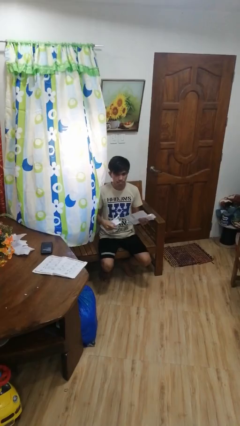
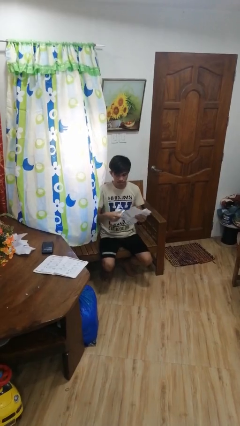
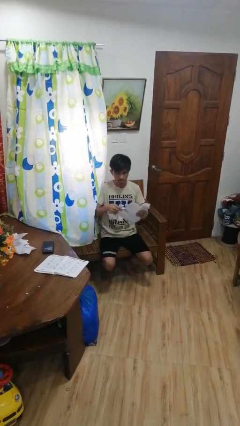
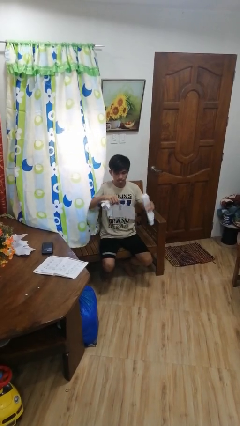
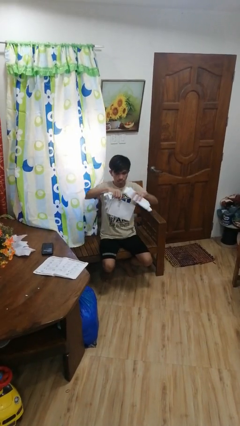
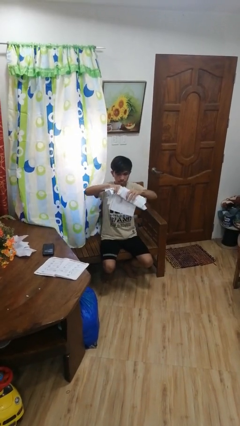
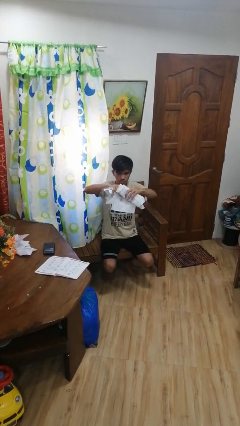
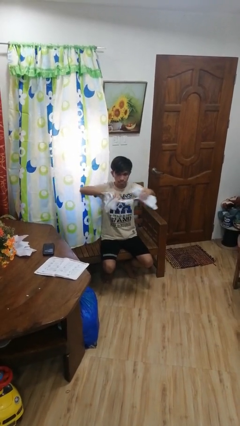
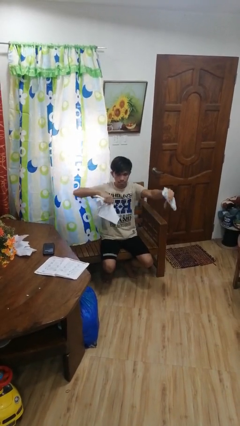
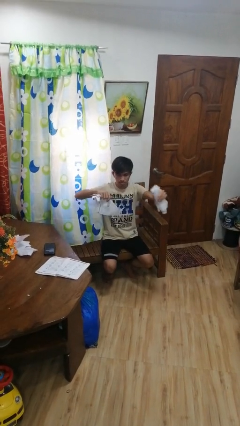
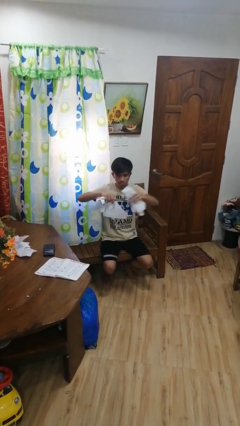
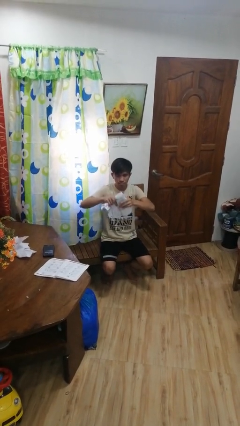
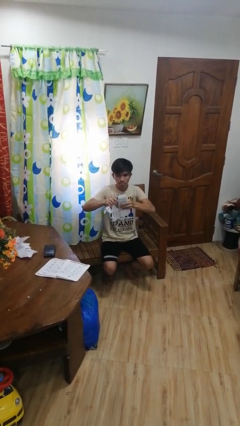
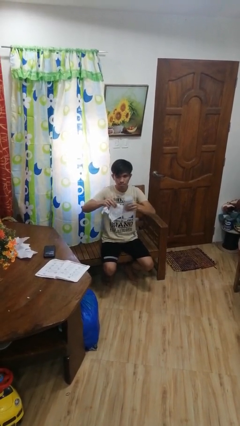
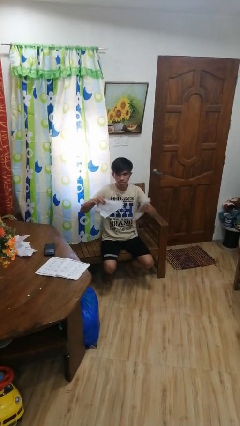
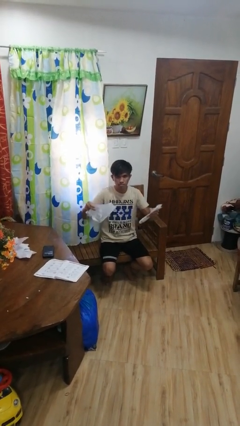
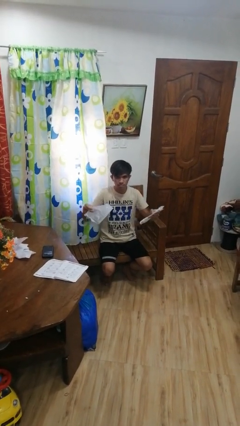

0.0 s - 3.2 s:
person tears paper

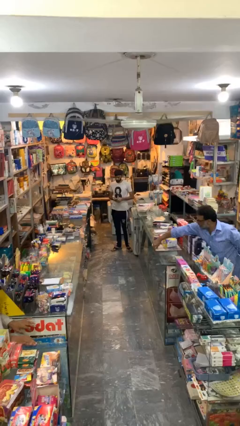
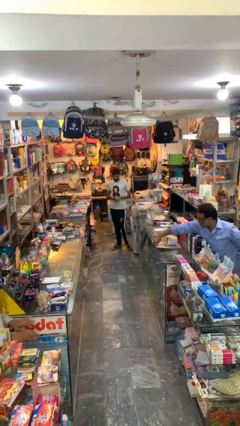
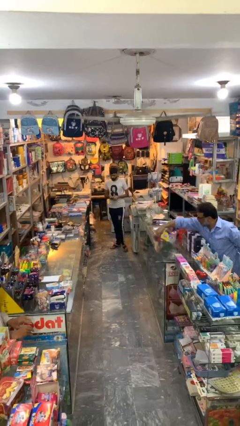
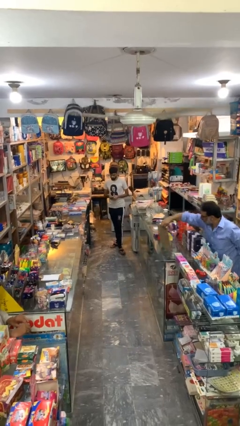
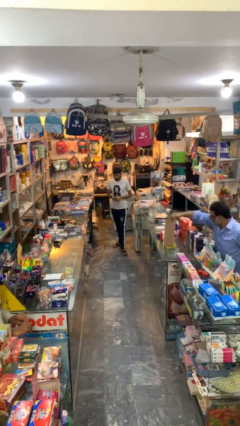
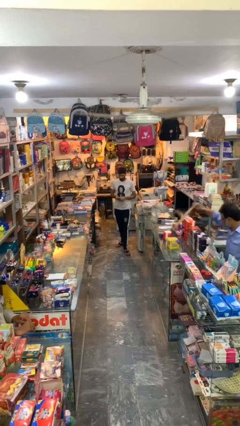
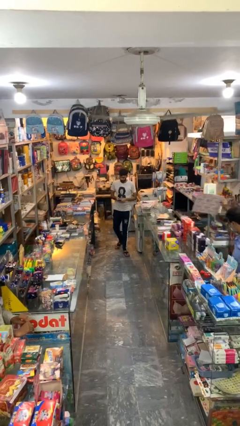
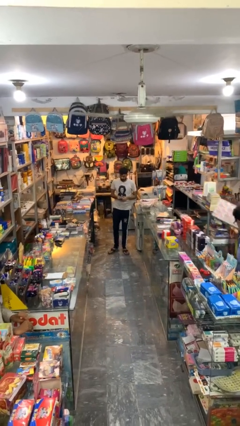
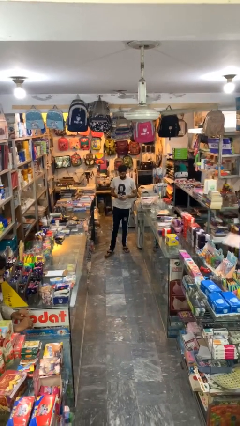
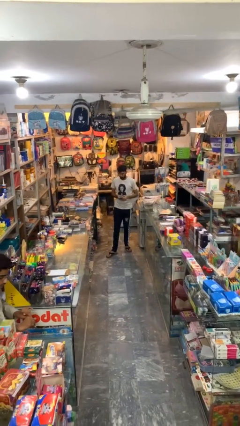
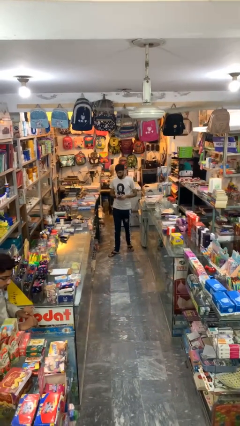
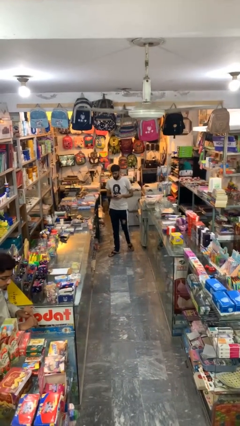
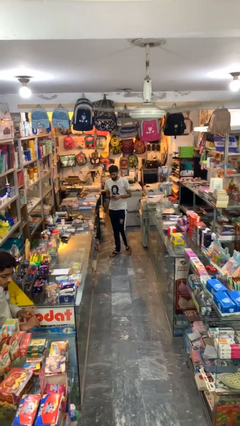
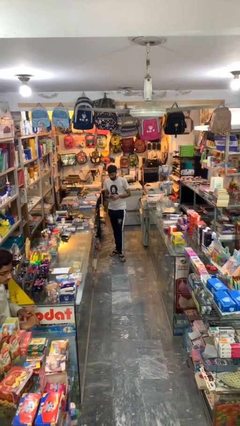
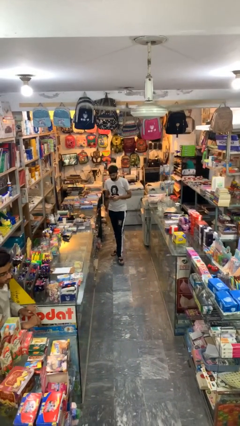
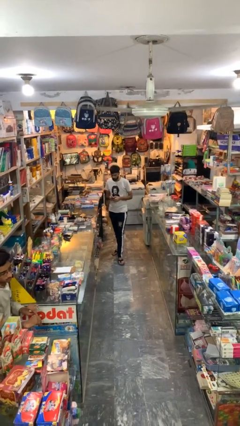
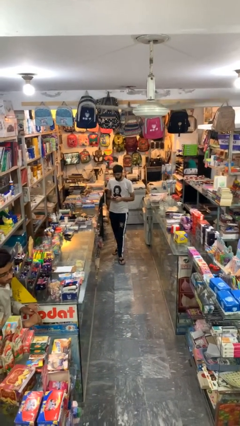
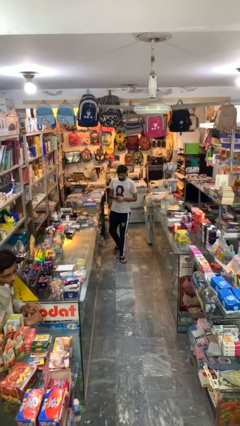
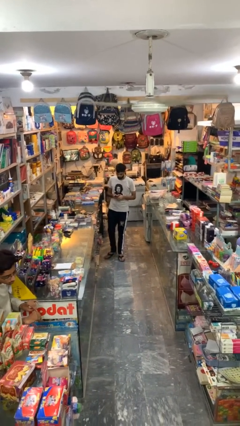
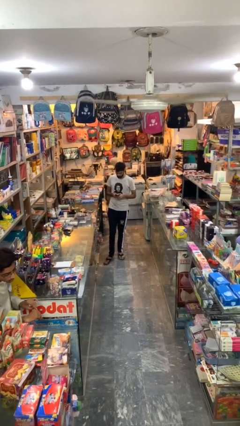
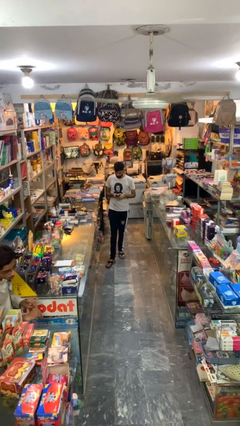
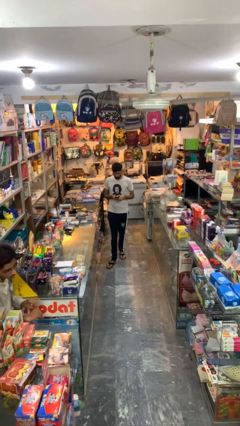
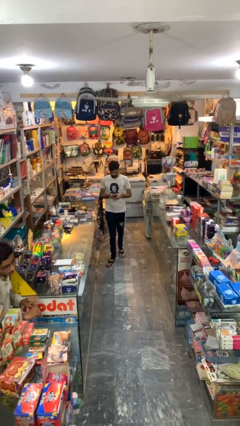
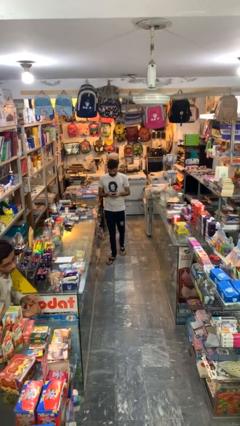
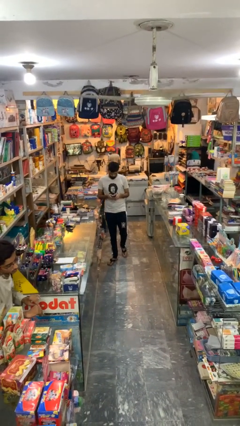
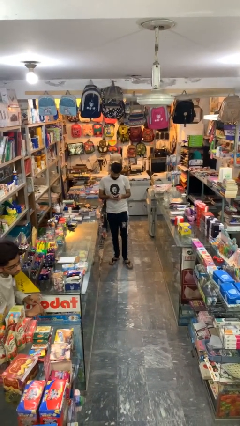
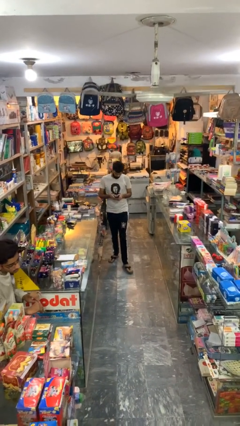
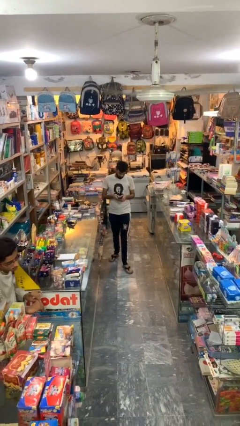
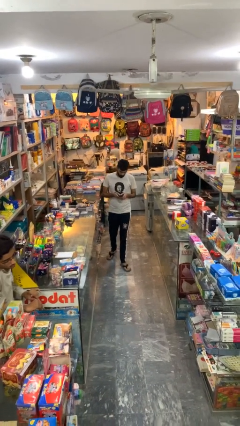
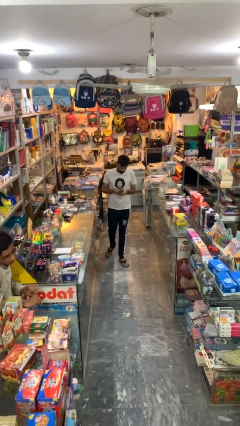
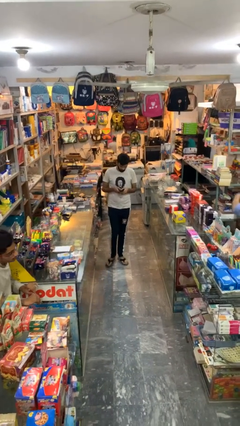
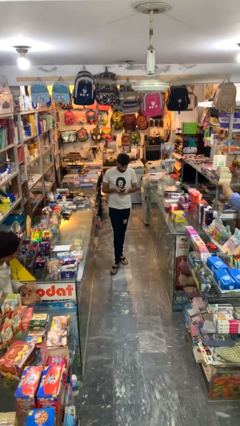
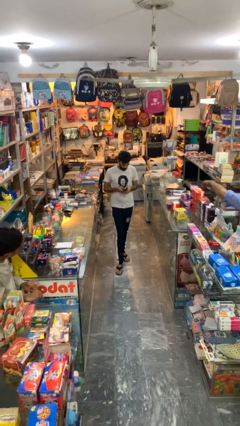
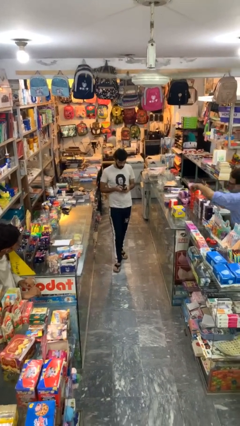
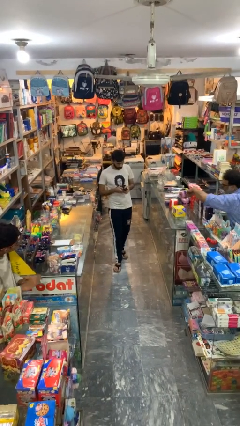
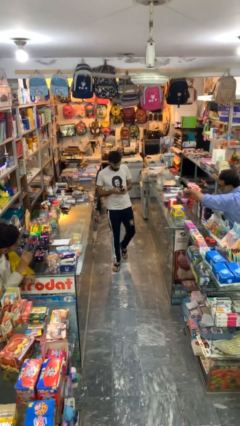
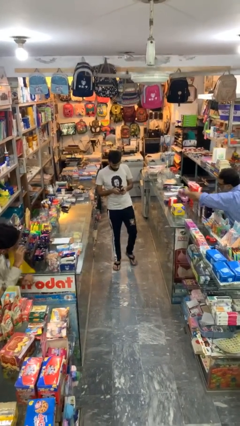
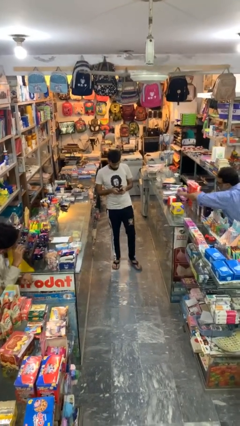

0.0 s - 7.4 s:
person texts on phone

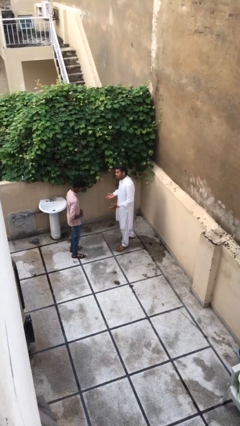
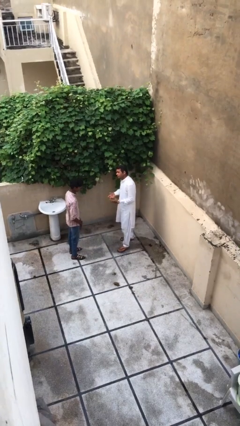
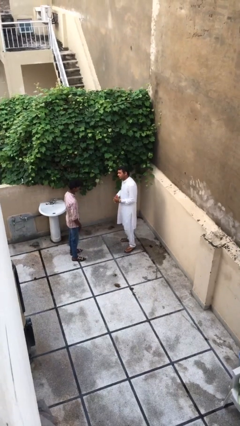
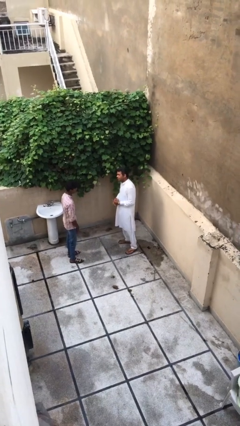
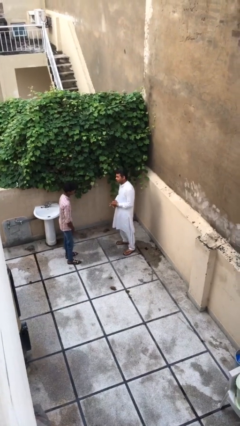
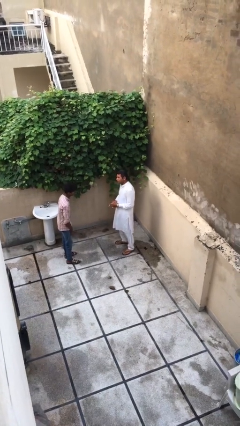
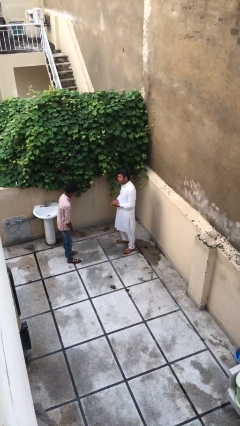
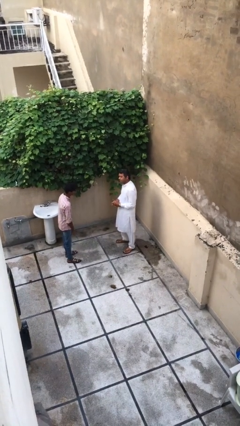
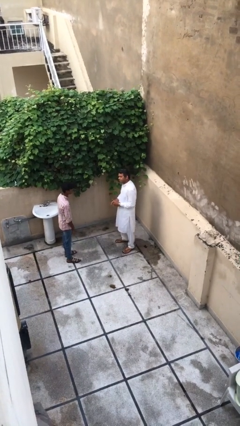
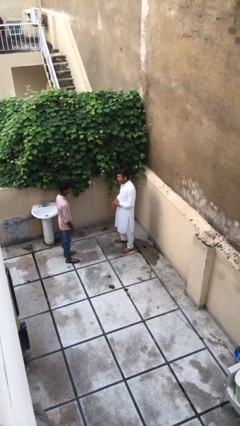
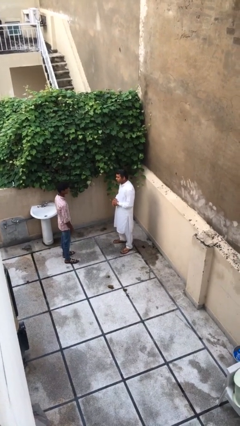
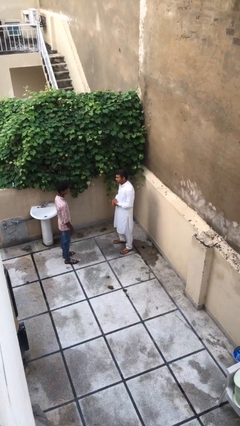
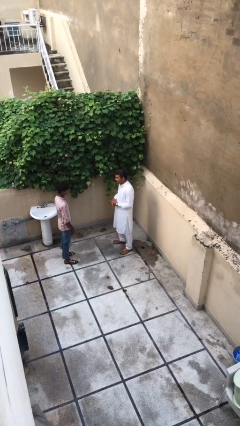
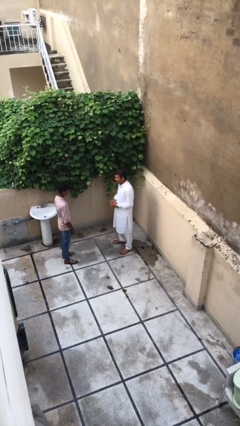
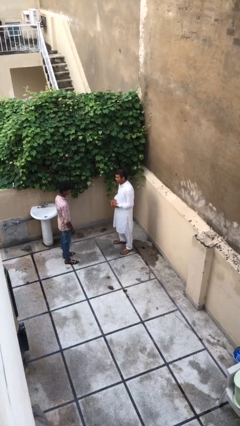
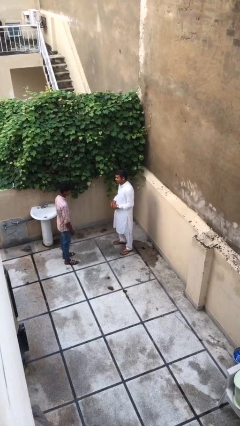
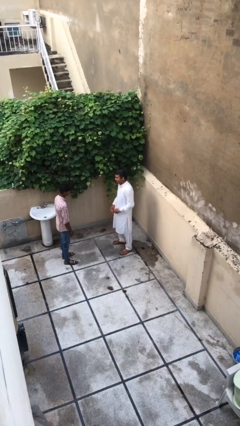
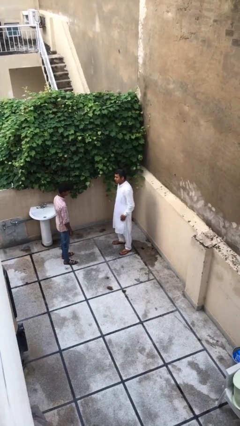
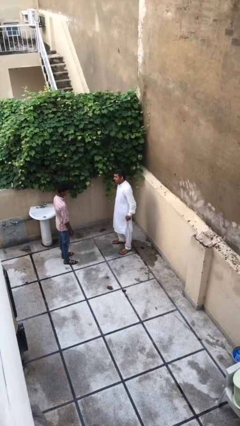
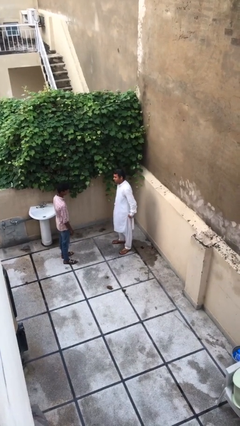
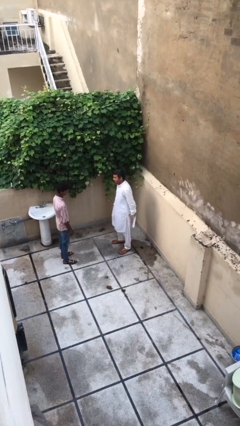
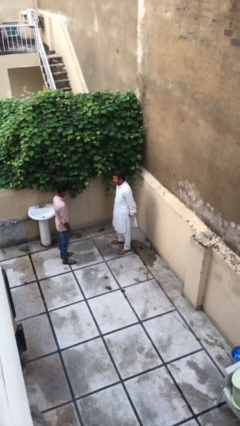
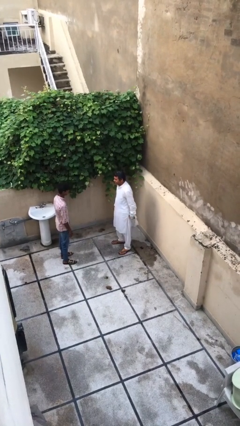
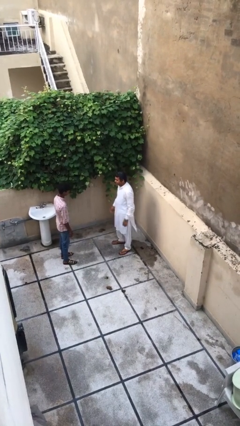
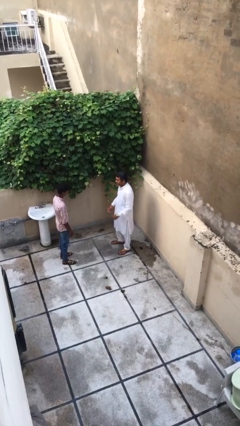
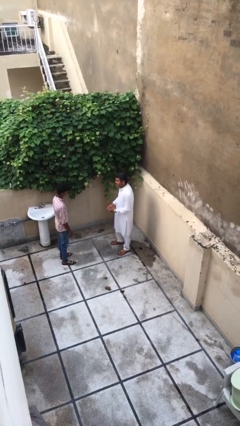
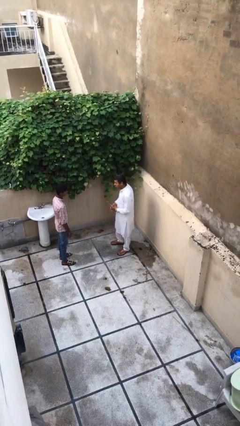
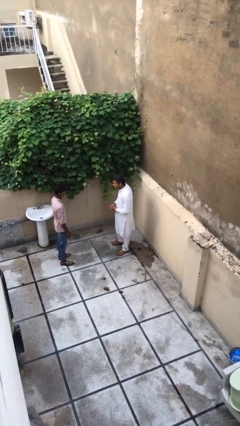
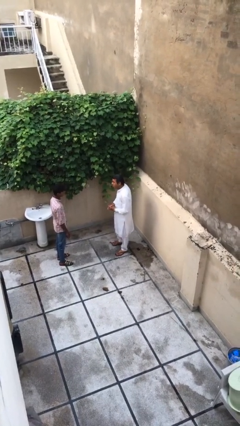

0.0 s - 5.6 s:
person talks to person

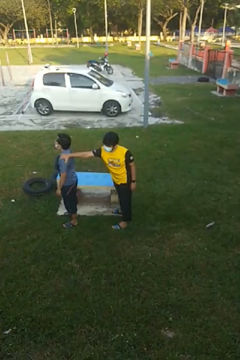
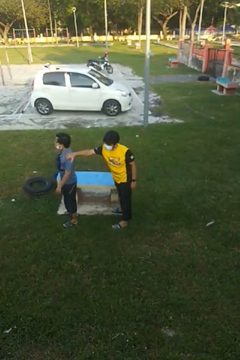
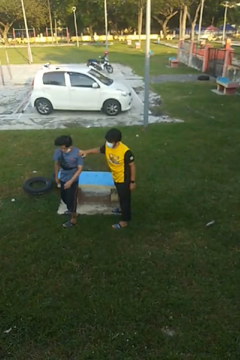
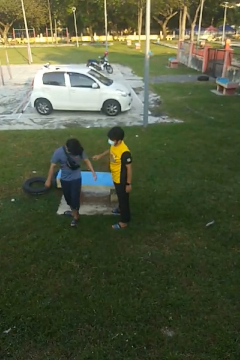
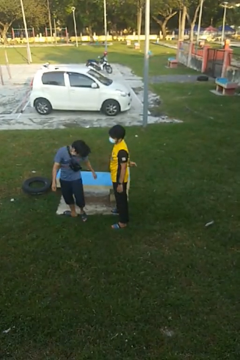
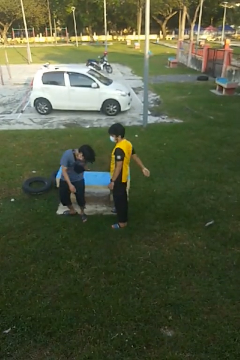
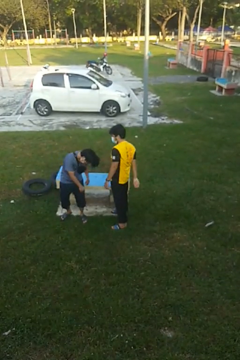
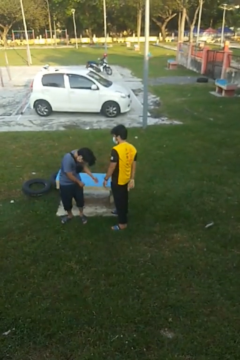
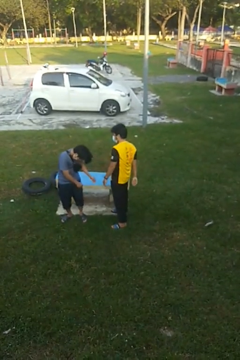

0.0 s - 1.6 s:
person spins person around

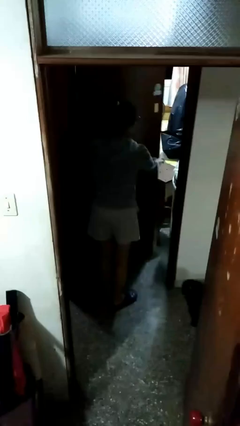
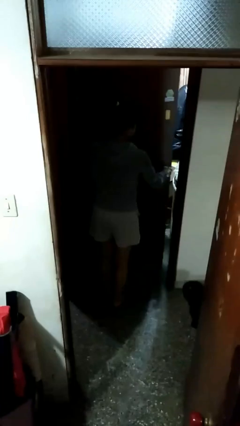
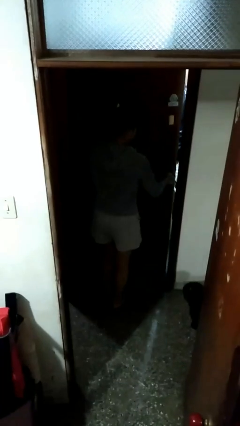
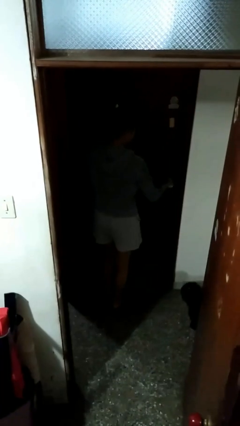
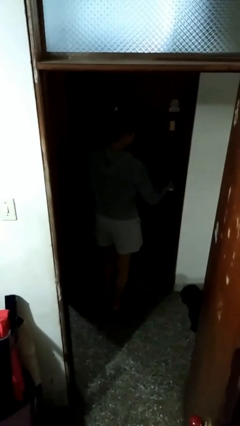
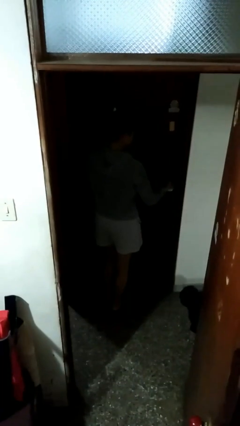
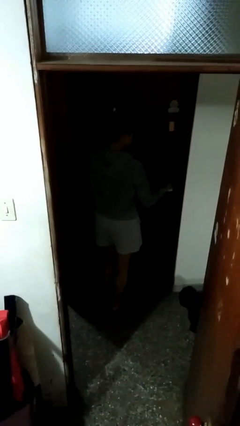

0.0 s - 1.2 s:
person closes facility door
